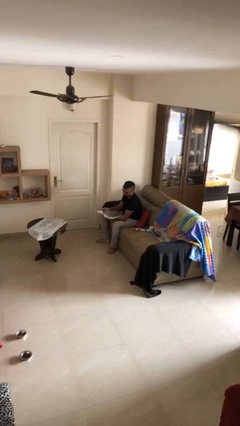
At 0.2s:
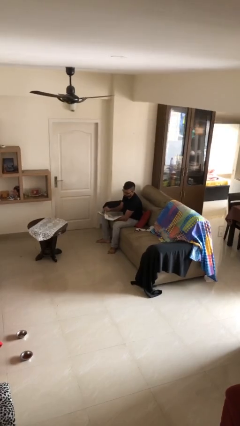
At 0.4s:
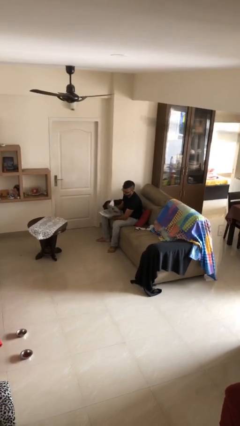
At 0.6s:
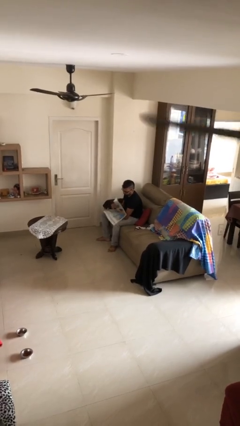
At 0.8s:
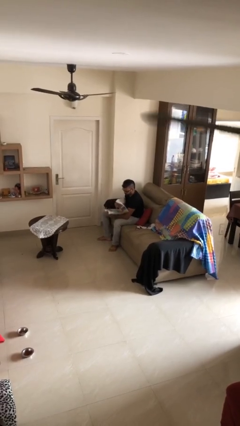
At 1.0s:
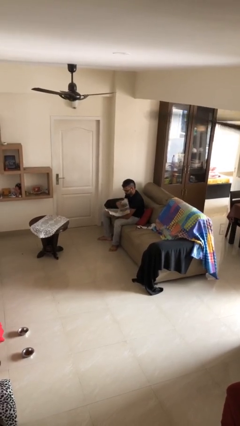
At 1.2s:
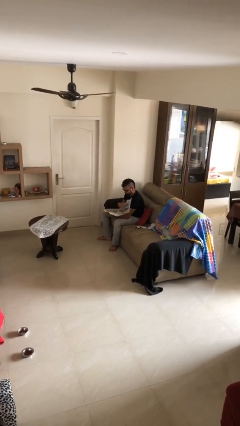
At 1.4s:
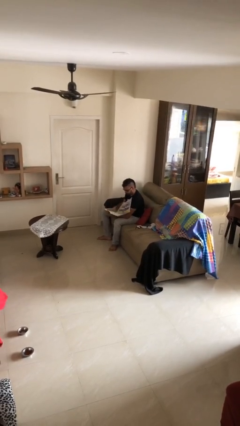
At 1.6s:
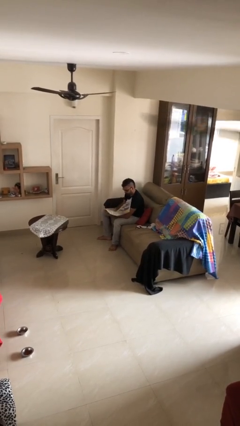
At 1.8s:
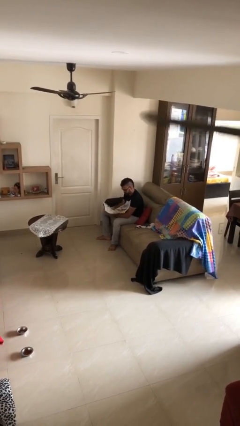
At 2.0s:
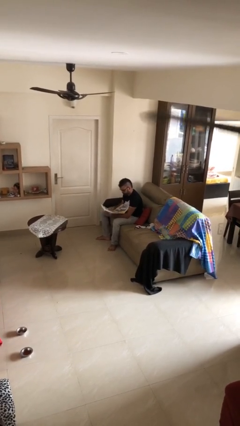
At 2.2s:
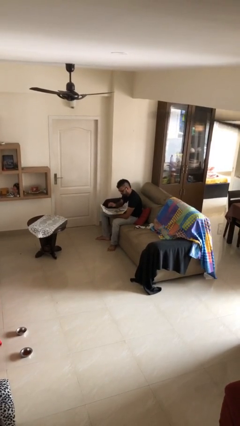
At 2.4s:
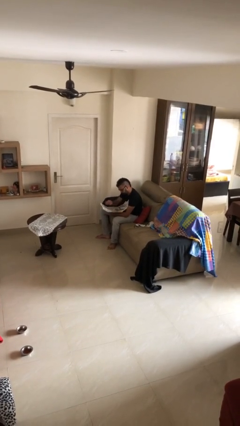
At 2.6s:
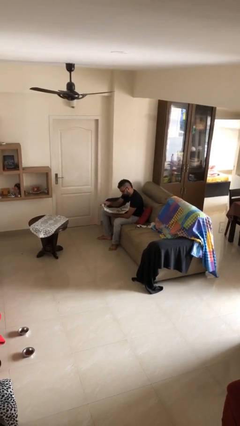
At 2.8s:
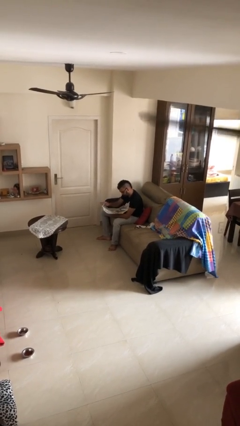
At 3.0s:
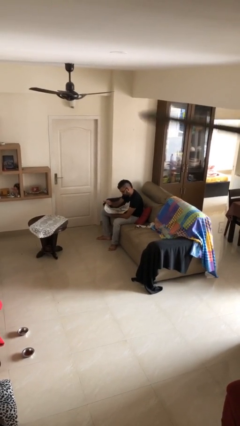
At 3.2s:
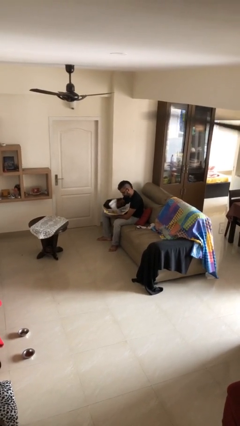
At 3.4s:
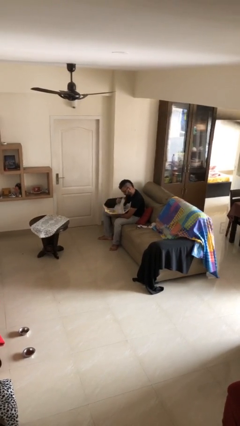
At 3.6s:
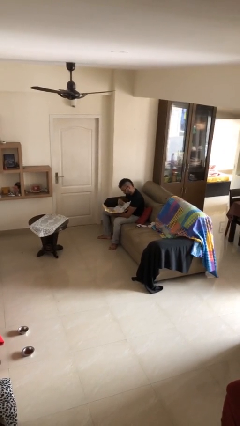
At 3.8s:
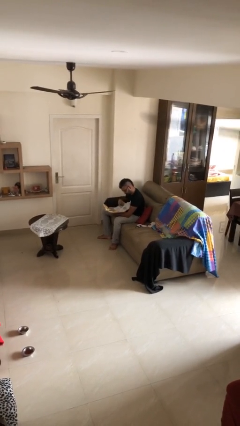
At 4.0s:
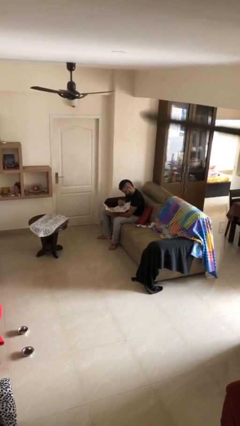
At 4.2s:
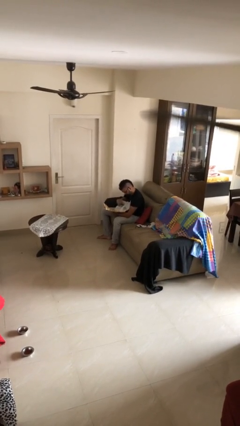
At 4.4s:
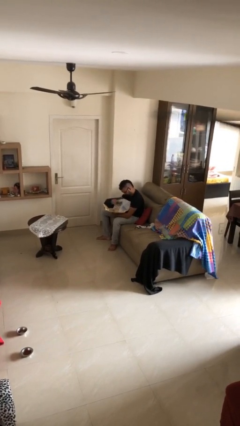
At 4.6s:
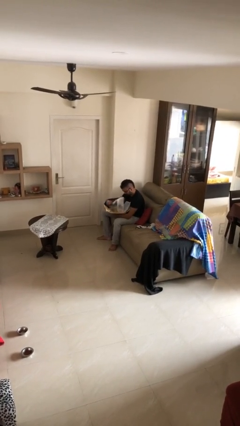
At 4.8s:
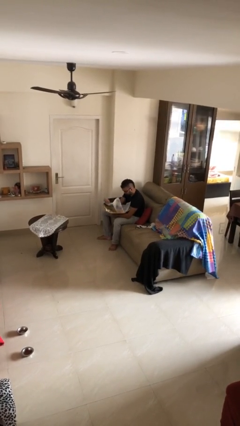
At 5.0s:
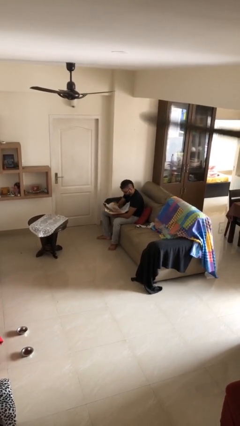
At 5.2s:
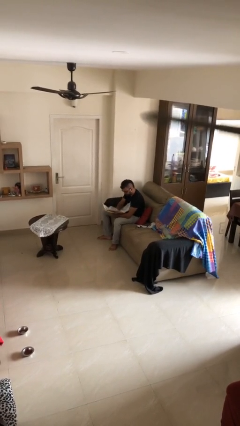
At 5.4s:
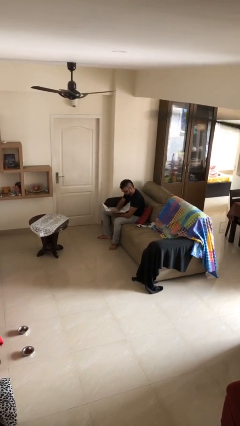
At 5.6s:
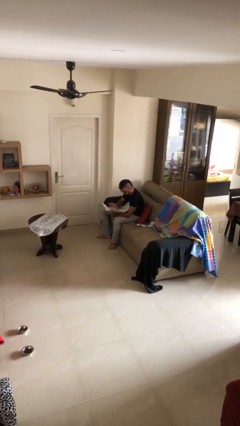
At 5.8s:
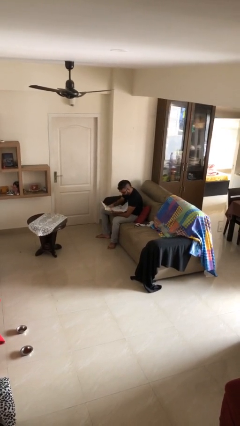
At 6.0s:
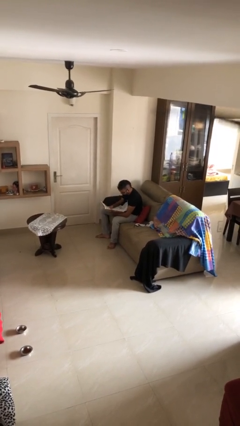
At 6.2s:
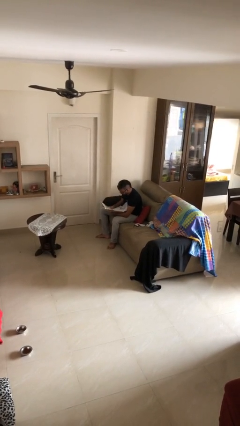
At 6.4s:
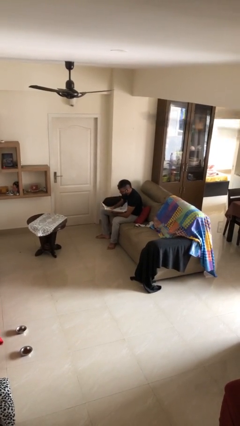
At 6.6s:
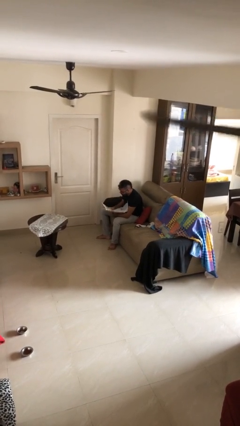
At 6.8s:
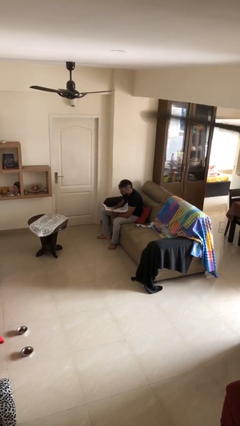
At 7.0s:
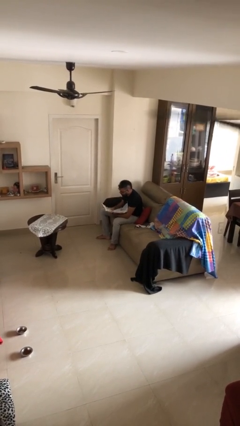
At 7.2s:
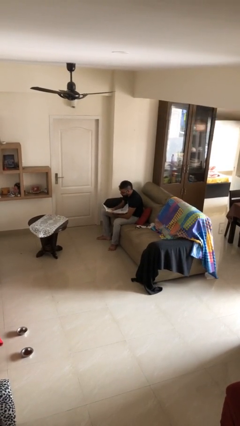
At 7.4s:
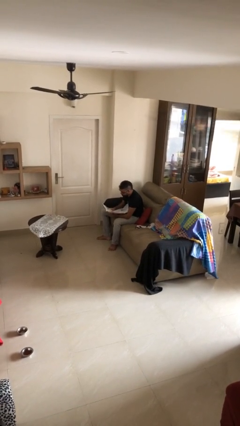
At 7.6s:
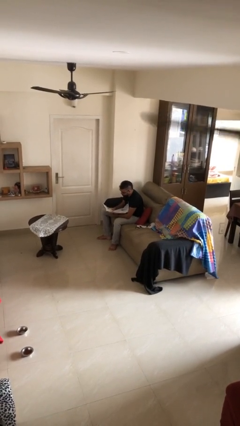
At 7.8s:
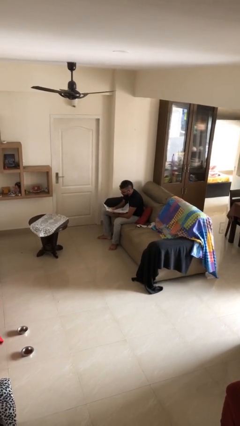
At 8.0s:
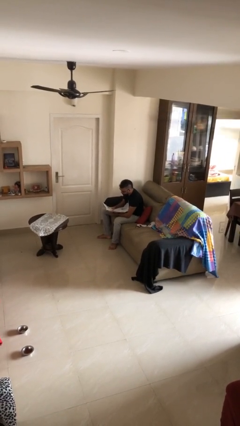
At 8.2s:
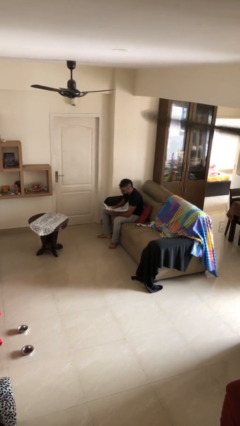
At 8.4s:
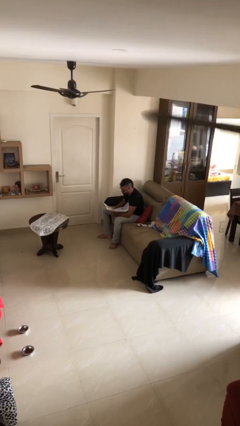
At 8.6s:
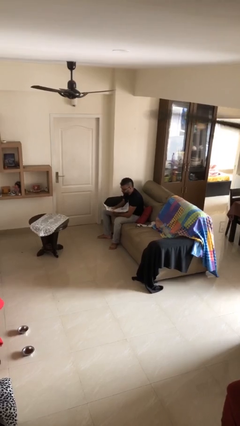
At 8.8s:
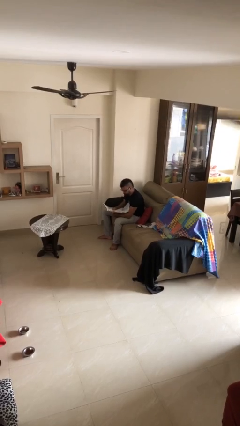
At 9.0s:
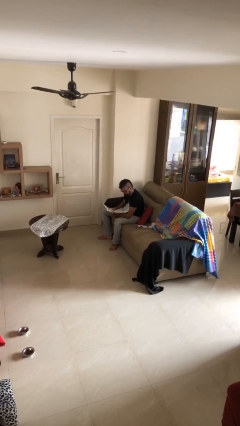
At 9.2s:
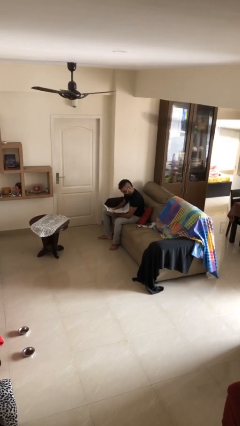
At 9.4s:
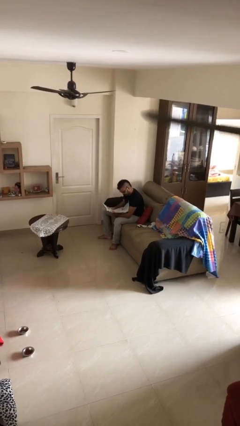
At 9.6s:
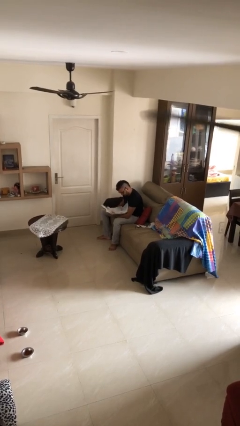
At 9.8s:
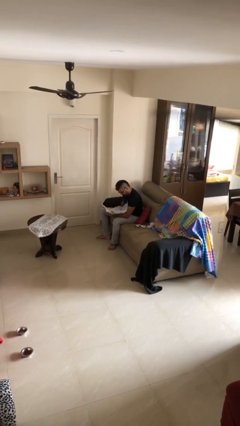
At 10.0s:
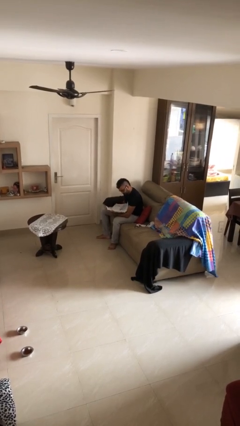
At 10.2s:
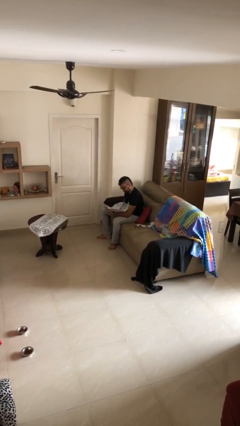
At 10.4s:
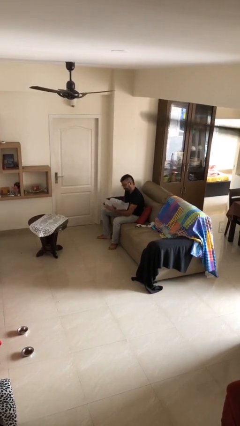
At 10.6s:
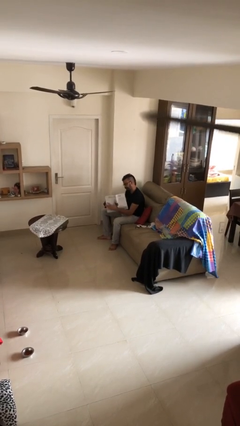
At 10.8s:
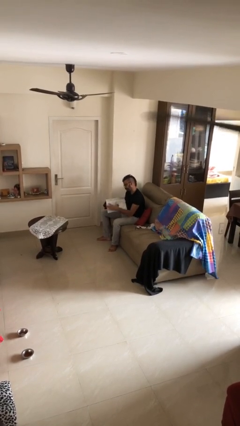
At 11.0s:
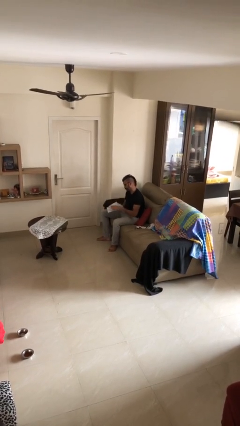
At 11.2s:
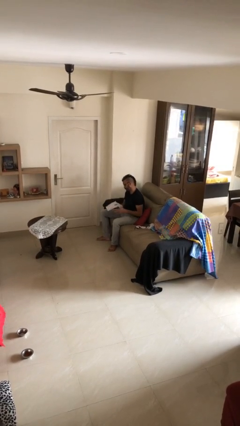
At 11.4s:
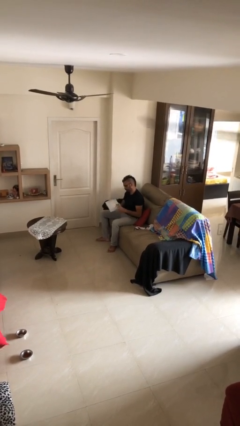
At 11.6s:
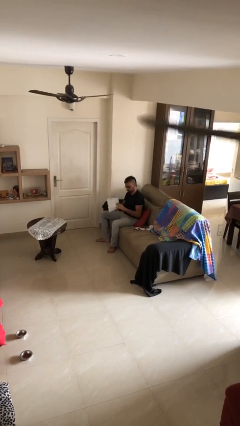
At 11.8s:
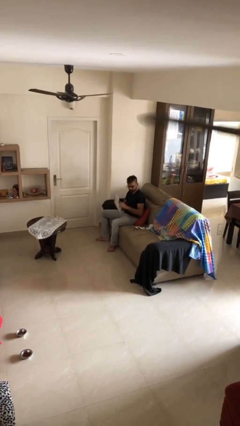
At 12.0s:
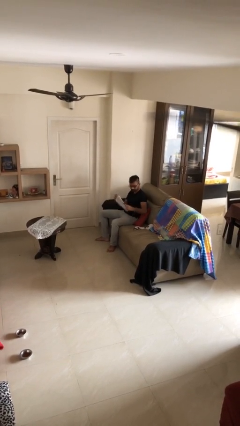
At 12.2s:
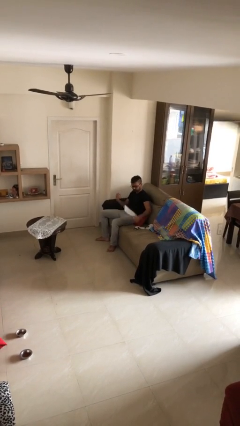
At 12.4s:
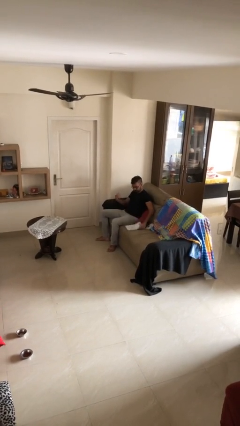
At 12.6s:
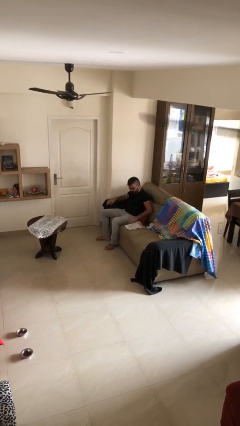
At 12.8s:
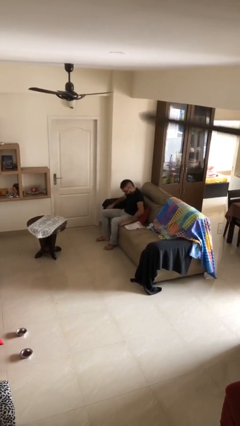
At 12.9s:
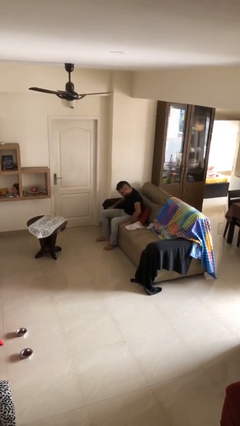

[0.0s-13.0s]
person reads document

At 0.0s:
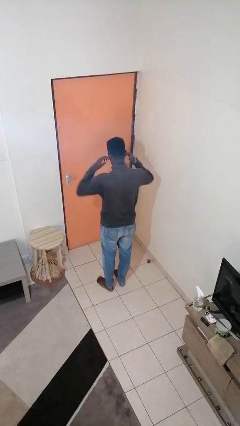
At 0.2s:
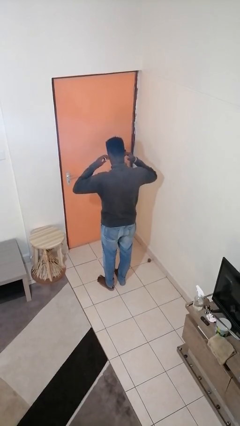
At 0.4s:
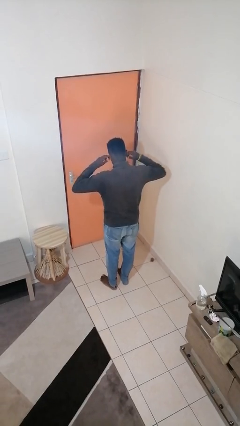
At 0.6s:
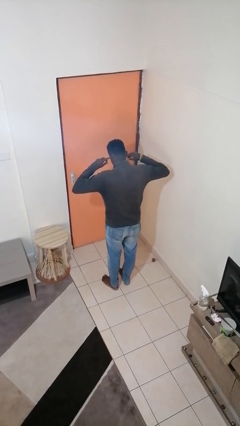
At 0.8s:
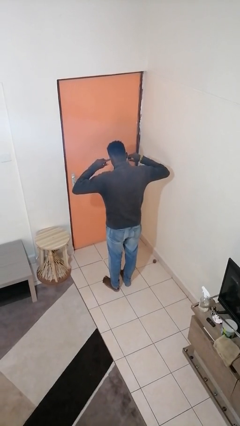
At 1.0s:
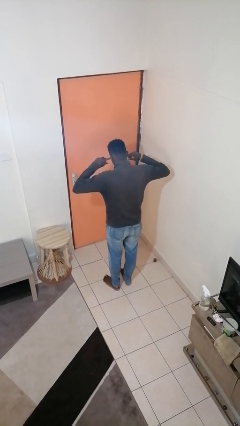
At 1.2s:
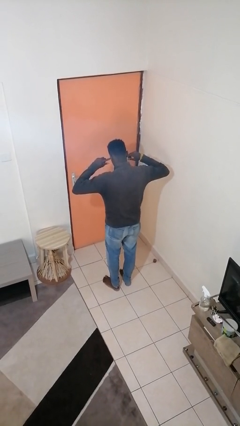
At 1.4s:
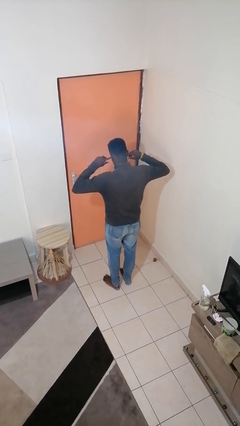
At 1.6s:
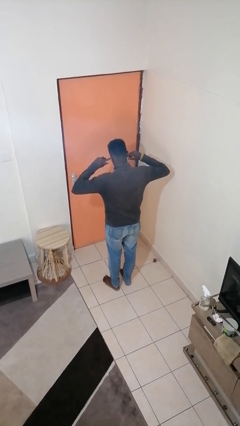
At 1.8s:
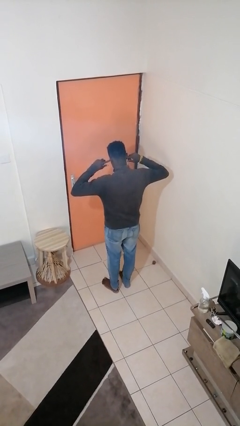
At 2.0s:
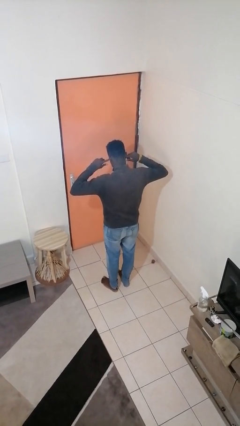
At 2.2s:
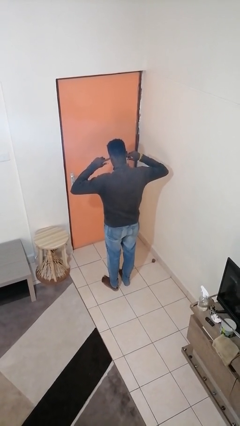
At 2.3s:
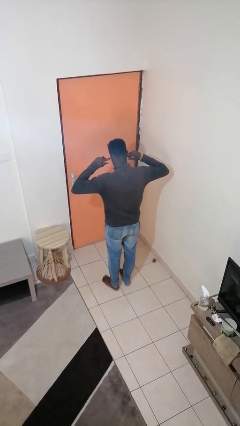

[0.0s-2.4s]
person puts fingers in ear

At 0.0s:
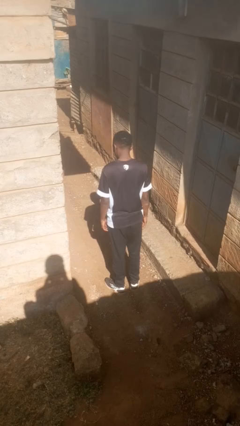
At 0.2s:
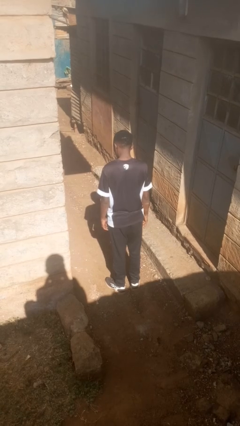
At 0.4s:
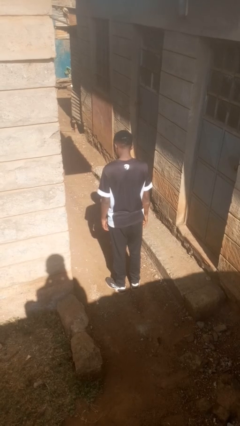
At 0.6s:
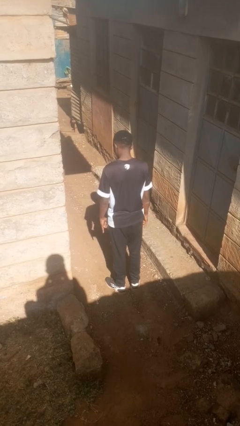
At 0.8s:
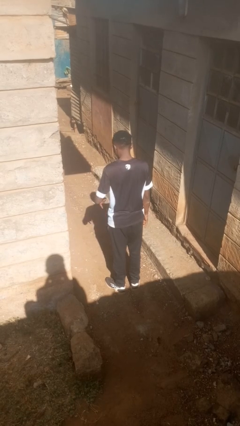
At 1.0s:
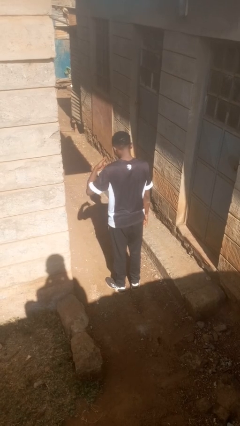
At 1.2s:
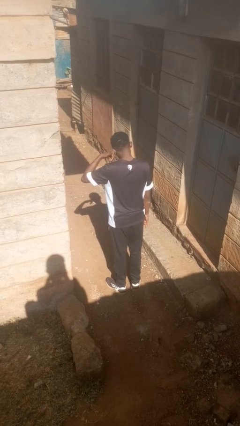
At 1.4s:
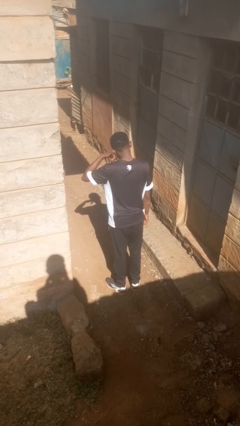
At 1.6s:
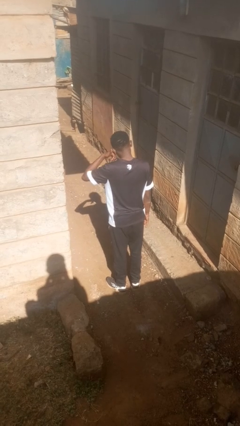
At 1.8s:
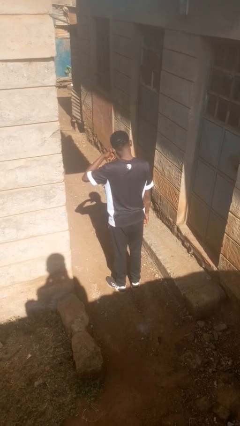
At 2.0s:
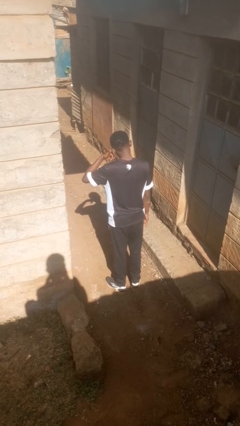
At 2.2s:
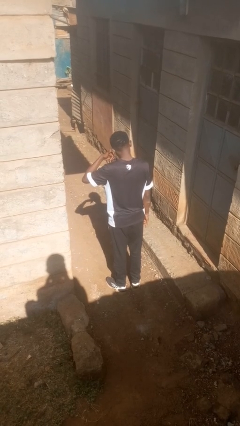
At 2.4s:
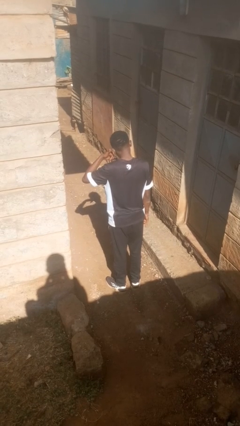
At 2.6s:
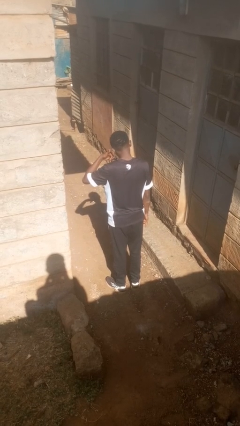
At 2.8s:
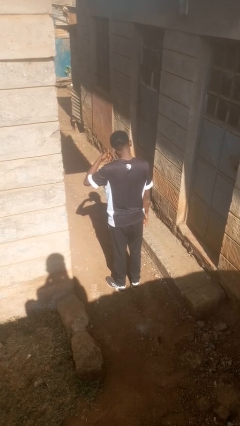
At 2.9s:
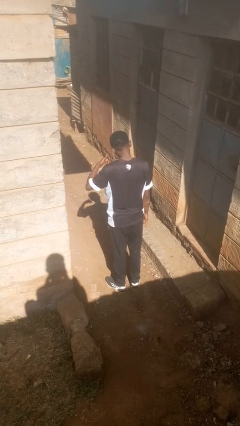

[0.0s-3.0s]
person gestures call me
